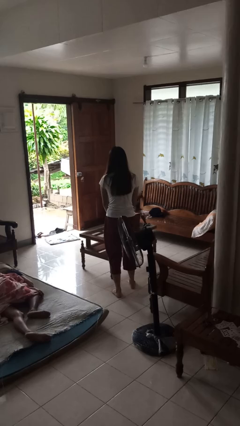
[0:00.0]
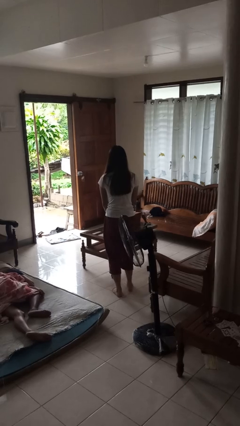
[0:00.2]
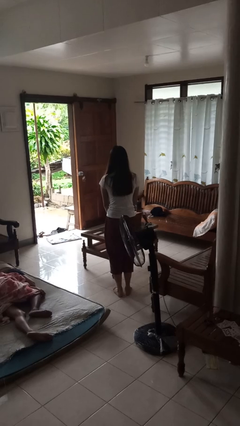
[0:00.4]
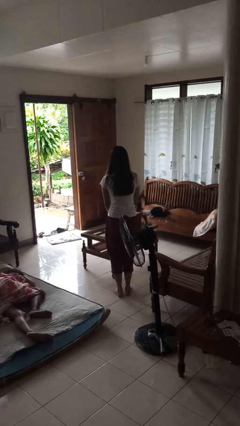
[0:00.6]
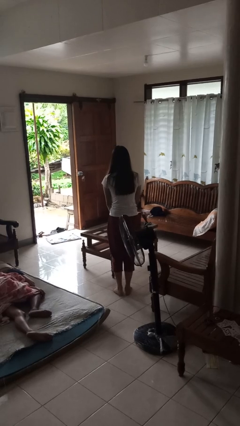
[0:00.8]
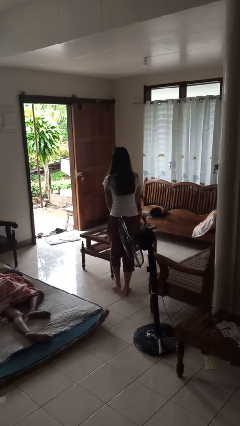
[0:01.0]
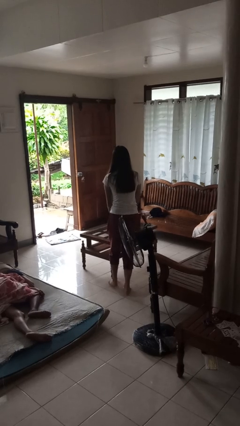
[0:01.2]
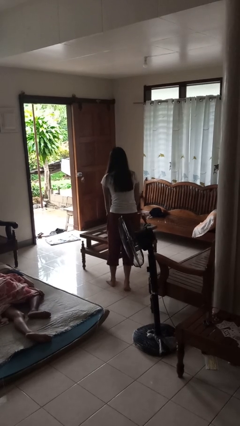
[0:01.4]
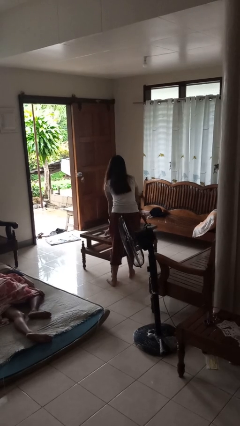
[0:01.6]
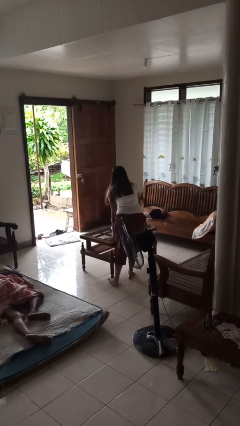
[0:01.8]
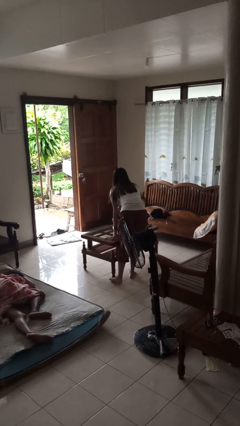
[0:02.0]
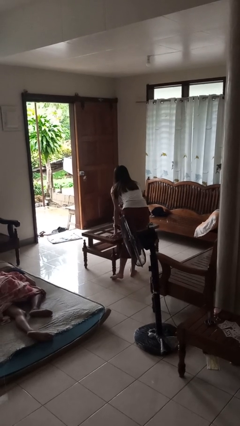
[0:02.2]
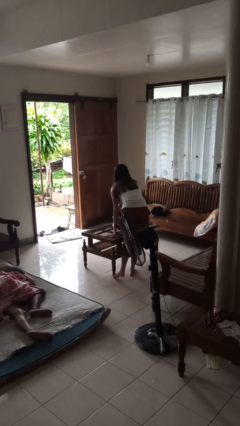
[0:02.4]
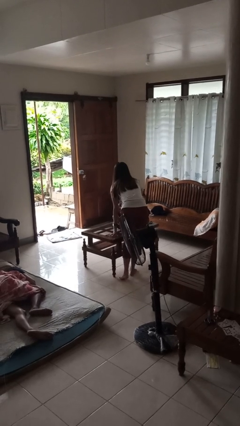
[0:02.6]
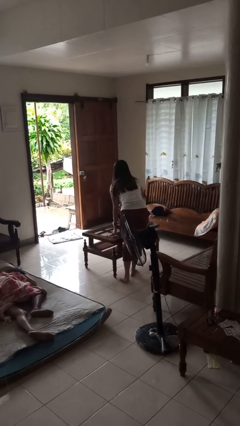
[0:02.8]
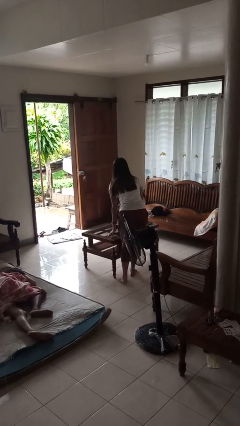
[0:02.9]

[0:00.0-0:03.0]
person bumps into table

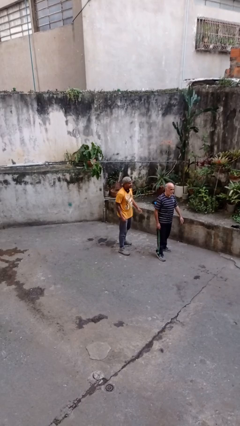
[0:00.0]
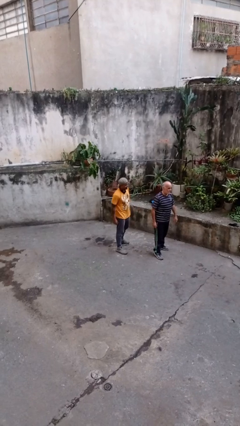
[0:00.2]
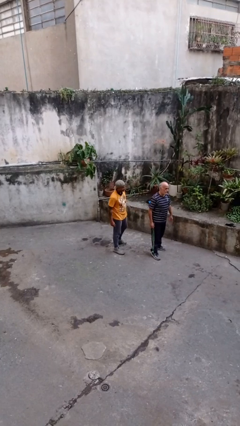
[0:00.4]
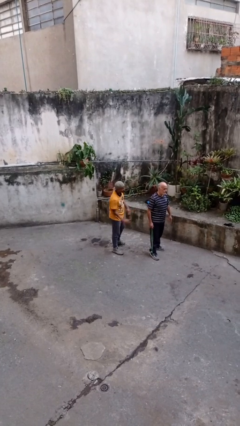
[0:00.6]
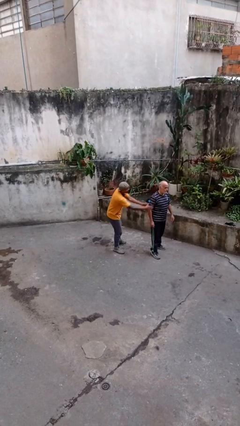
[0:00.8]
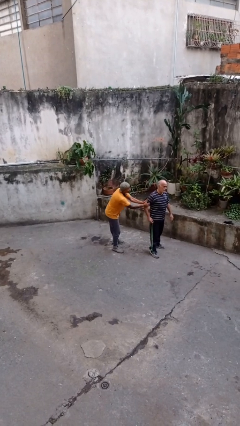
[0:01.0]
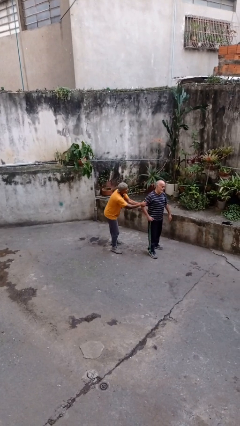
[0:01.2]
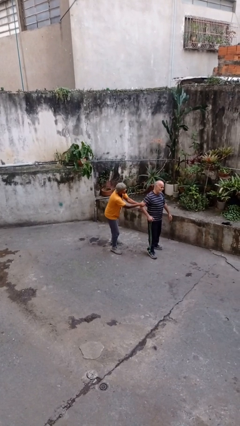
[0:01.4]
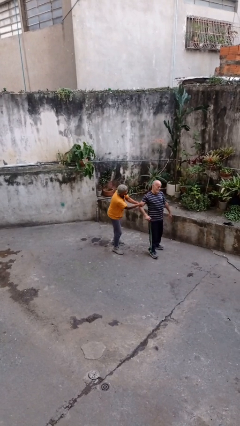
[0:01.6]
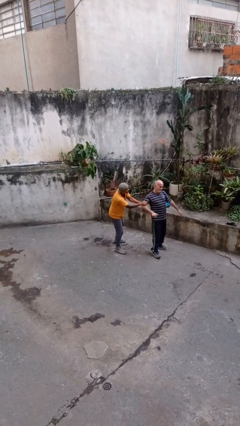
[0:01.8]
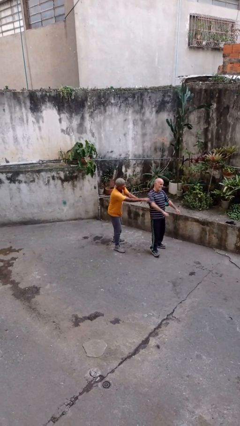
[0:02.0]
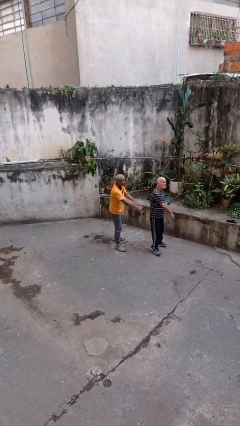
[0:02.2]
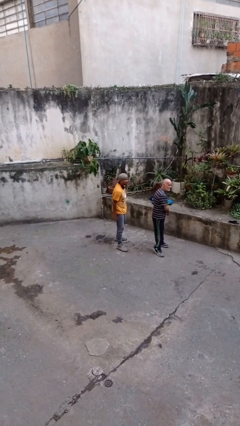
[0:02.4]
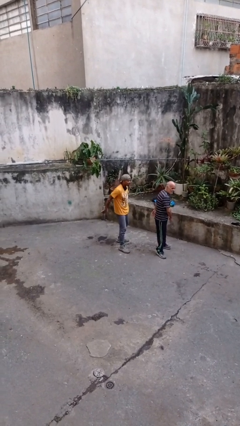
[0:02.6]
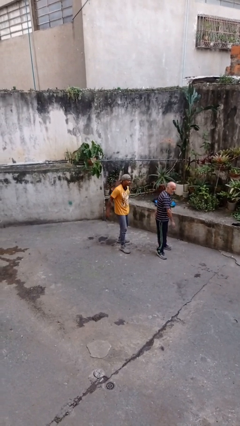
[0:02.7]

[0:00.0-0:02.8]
person grabs person by bicep

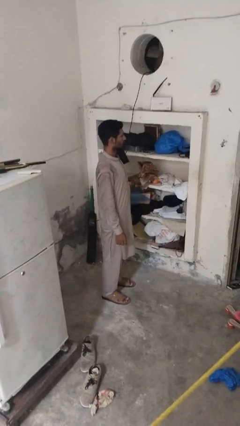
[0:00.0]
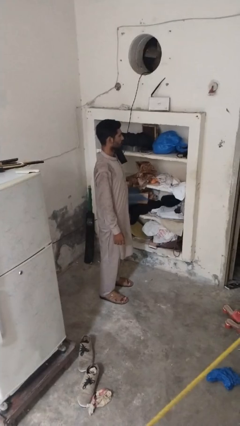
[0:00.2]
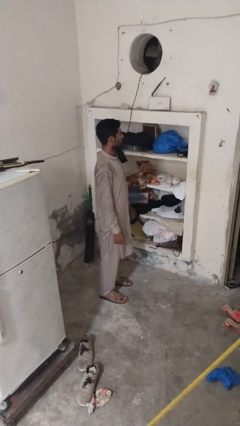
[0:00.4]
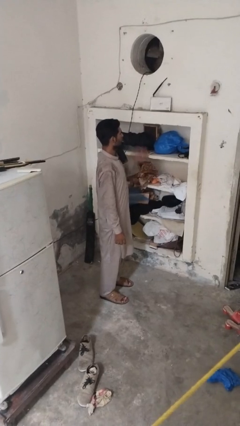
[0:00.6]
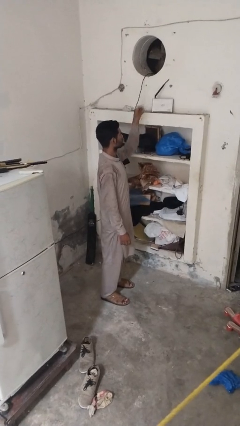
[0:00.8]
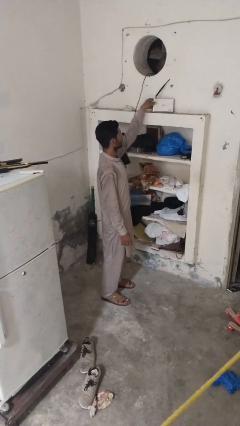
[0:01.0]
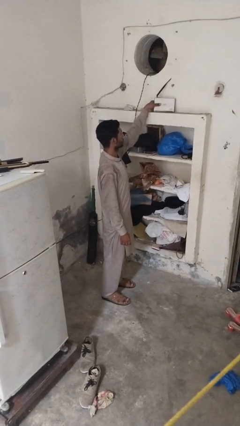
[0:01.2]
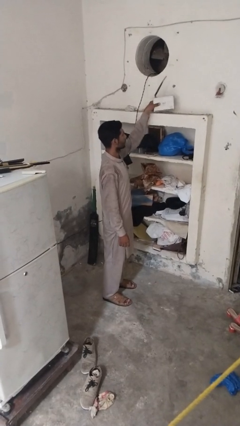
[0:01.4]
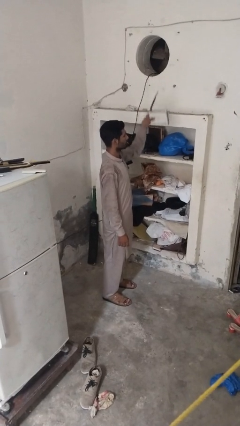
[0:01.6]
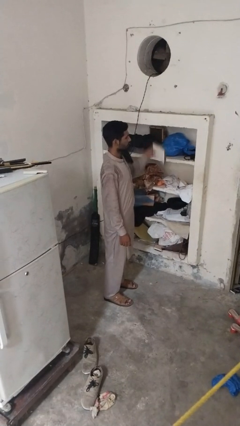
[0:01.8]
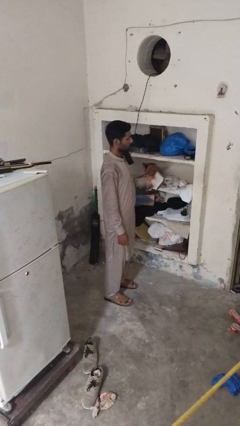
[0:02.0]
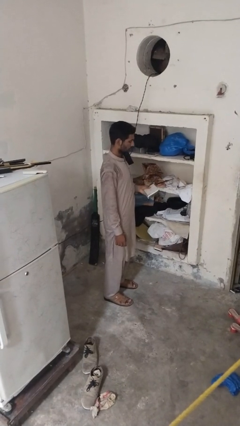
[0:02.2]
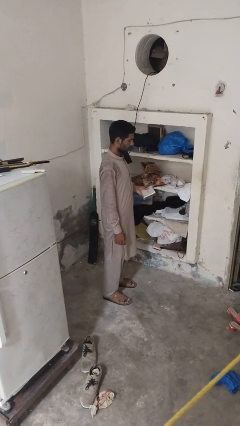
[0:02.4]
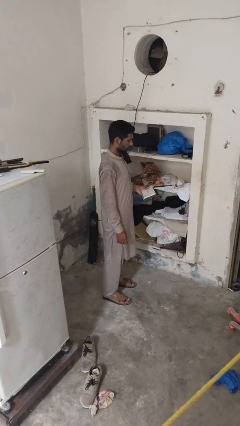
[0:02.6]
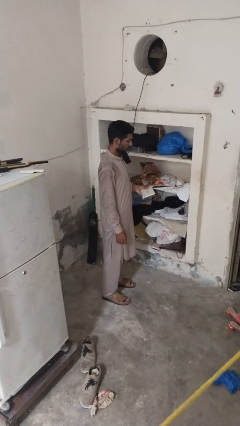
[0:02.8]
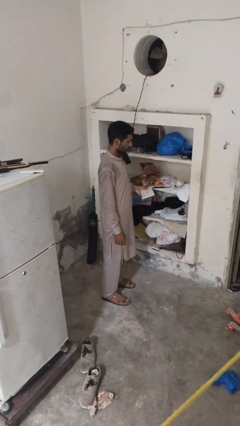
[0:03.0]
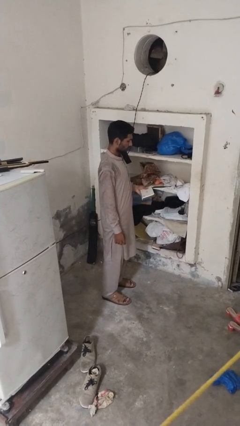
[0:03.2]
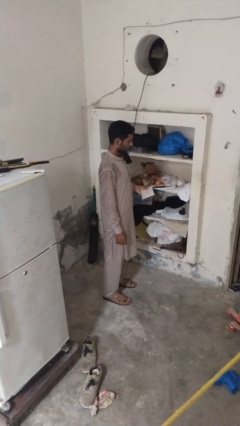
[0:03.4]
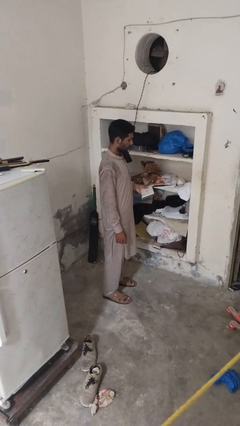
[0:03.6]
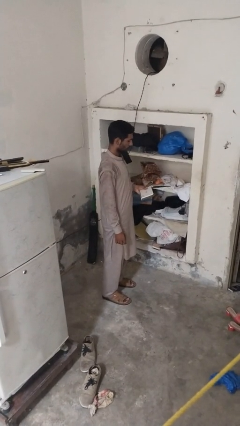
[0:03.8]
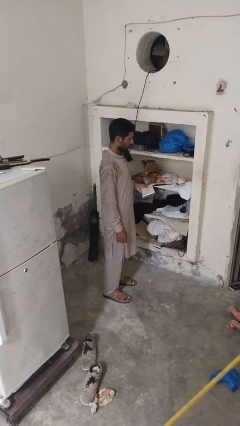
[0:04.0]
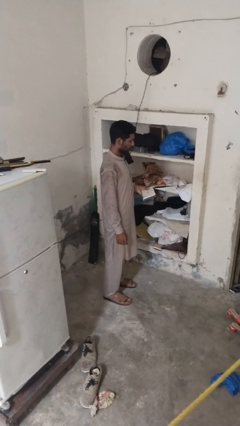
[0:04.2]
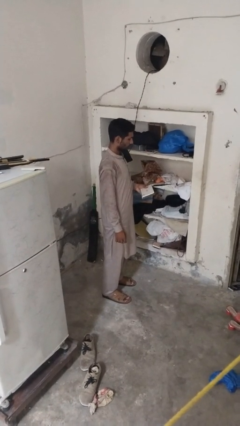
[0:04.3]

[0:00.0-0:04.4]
person picks up object from shelf

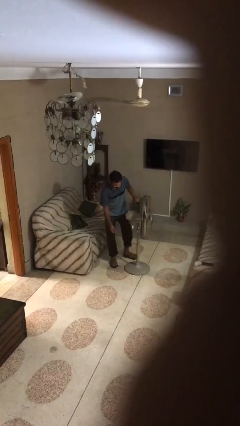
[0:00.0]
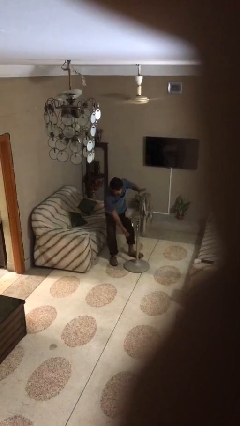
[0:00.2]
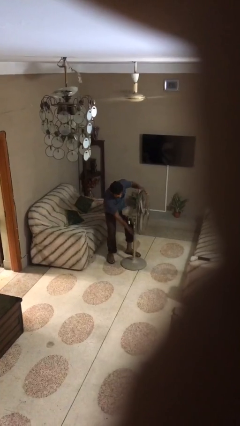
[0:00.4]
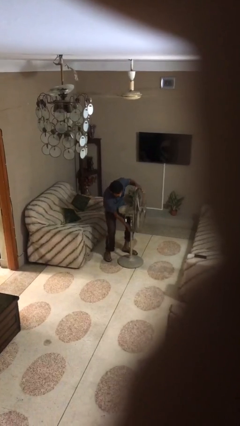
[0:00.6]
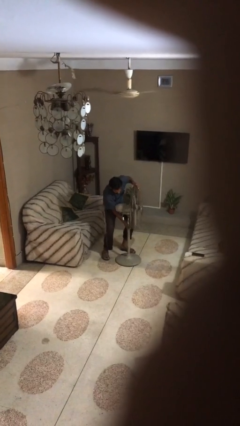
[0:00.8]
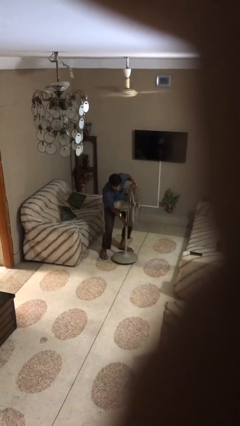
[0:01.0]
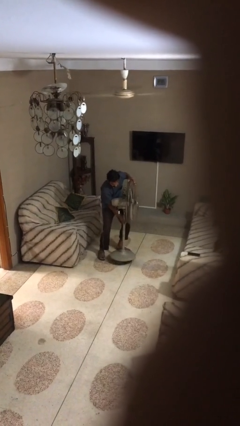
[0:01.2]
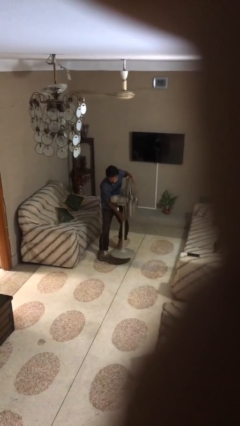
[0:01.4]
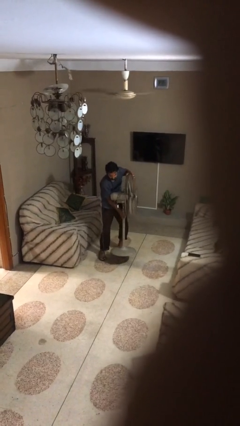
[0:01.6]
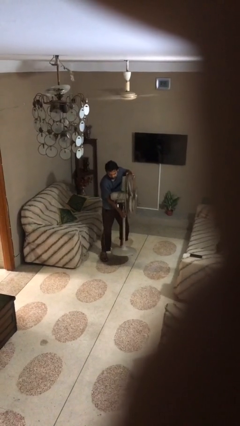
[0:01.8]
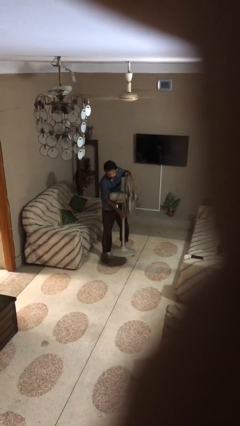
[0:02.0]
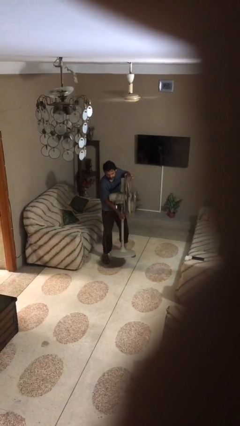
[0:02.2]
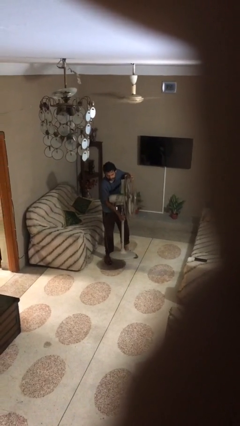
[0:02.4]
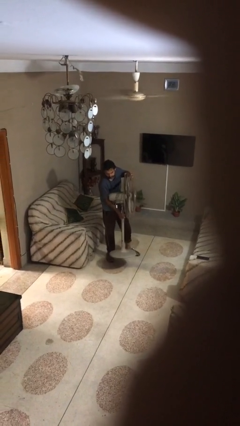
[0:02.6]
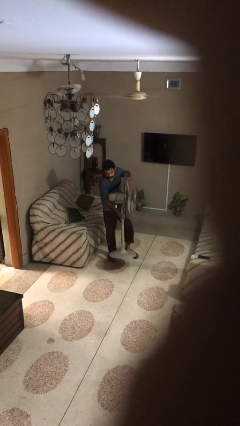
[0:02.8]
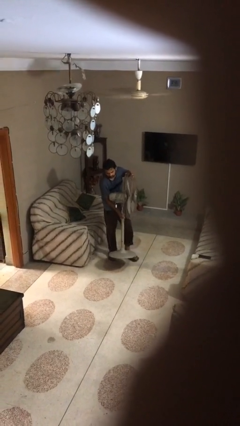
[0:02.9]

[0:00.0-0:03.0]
person picks up object from floor

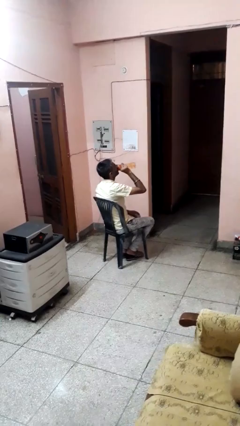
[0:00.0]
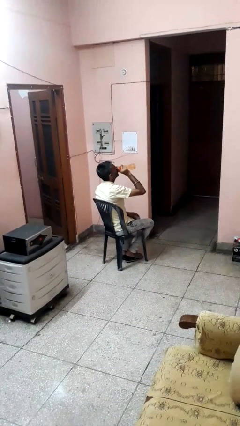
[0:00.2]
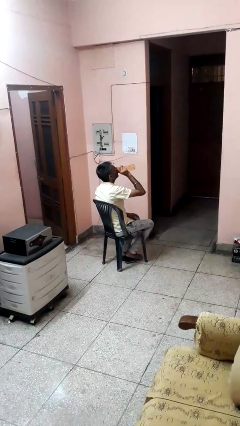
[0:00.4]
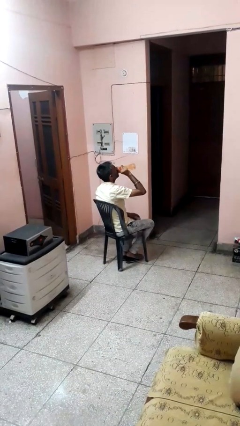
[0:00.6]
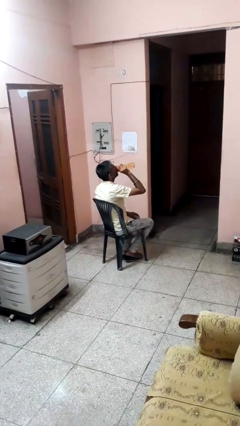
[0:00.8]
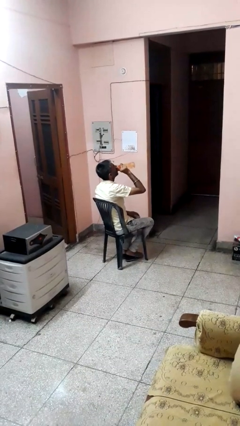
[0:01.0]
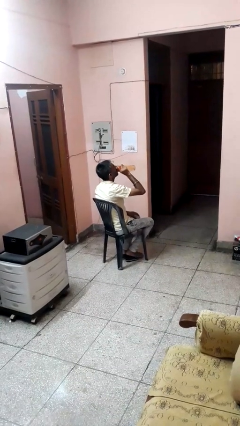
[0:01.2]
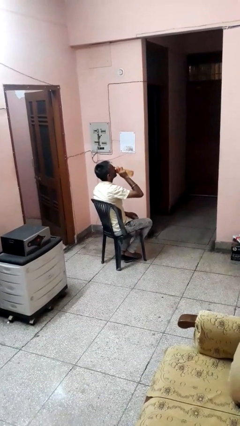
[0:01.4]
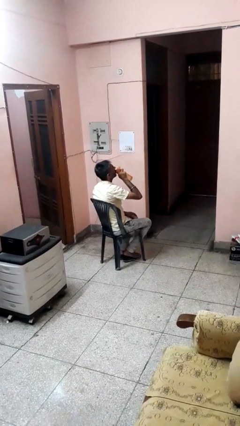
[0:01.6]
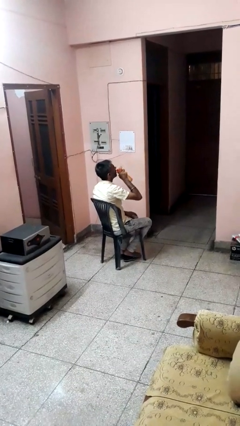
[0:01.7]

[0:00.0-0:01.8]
person drinks from bottle

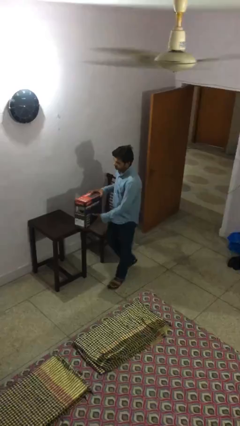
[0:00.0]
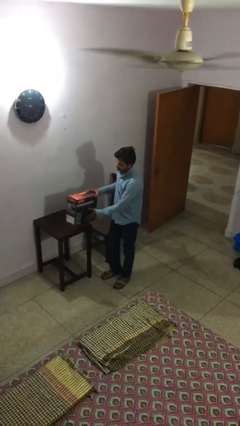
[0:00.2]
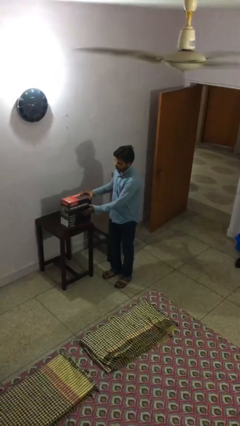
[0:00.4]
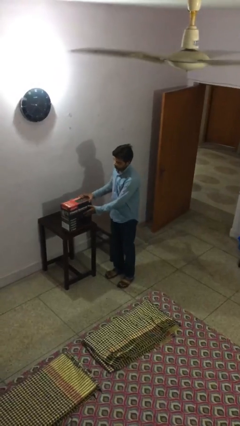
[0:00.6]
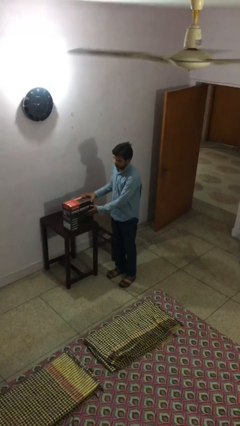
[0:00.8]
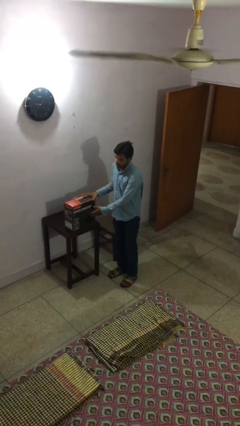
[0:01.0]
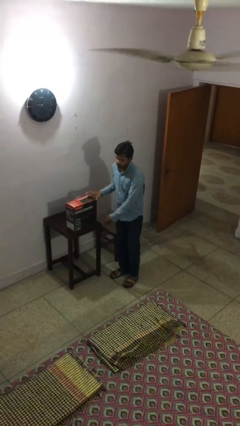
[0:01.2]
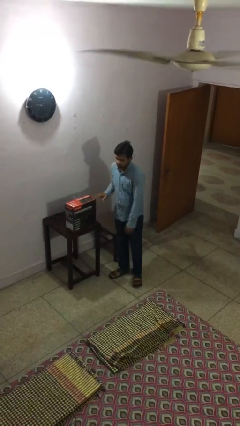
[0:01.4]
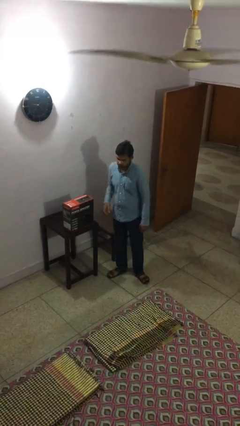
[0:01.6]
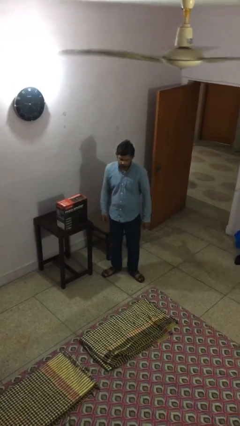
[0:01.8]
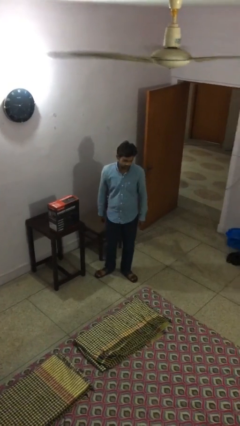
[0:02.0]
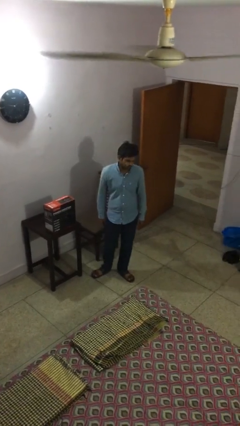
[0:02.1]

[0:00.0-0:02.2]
person puts down object on table

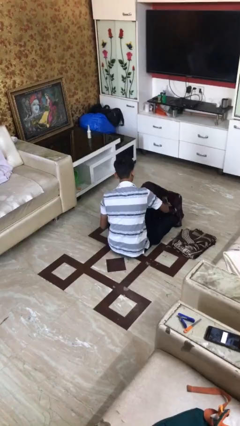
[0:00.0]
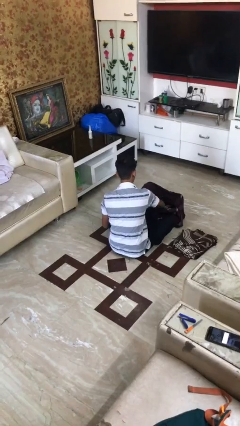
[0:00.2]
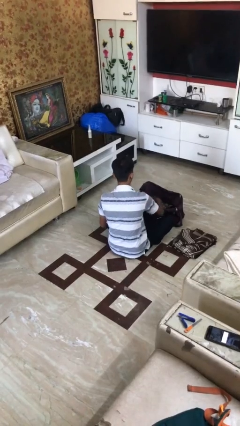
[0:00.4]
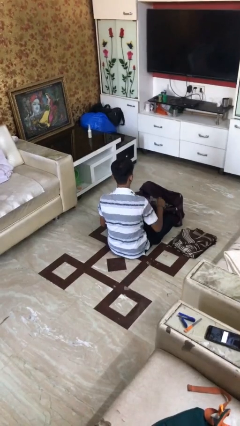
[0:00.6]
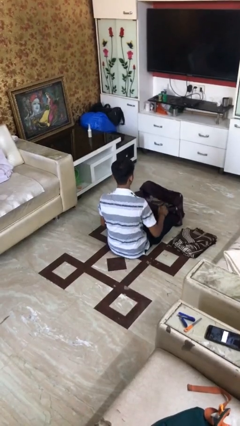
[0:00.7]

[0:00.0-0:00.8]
person loads clothes into suitcase
